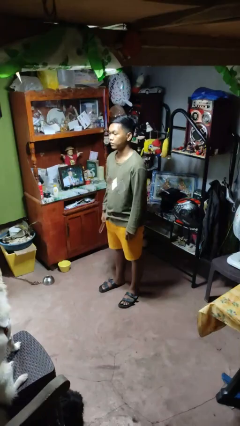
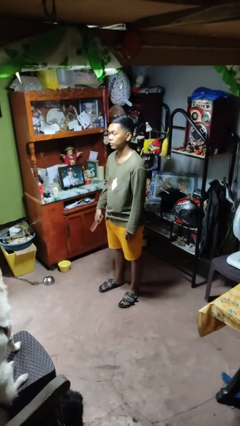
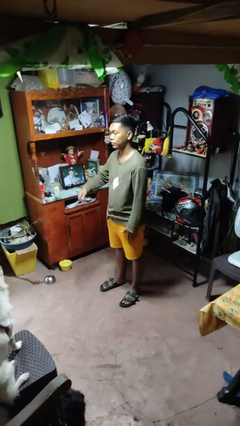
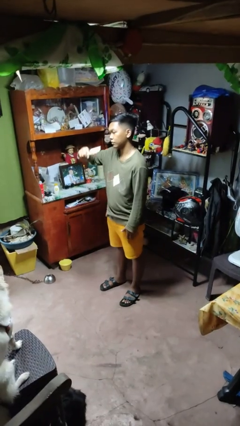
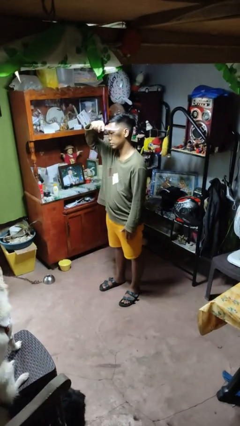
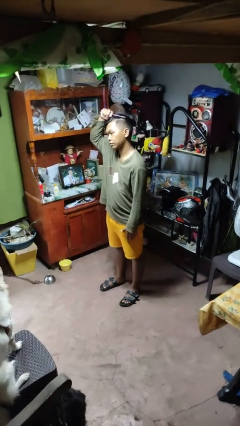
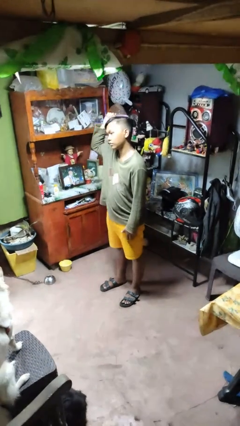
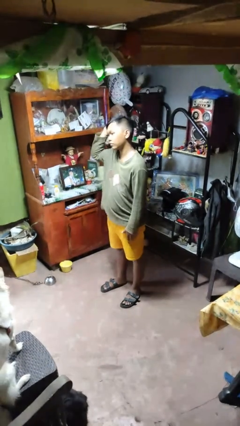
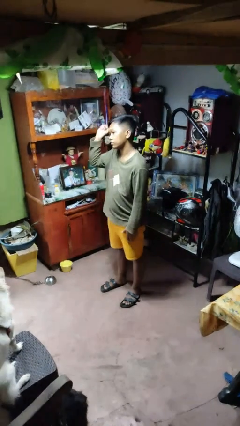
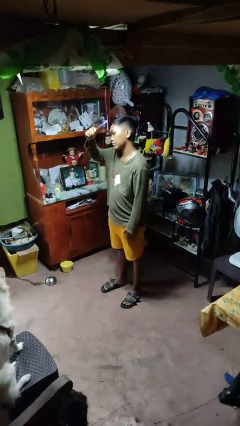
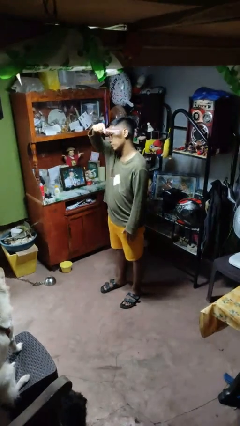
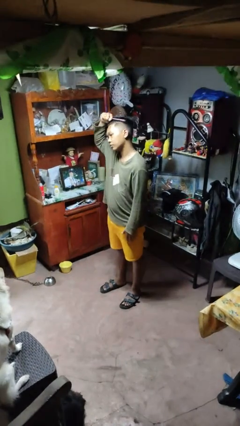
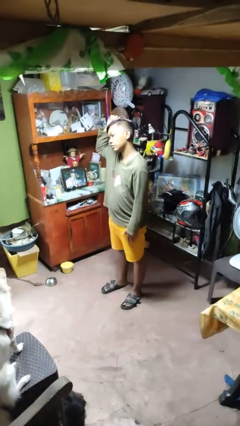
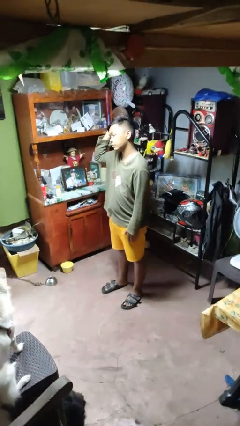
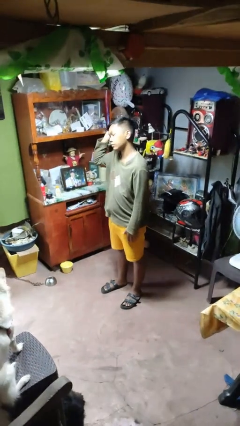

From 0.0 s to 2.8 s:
person brushes hair

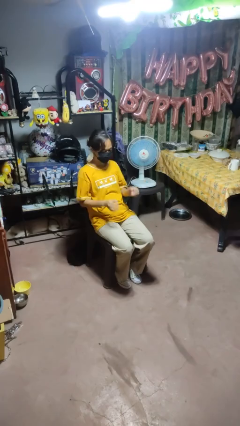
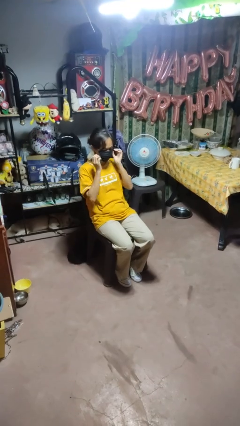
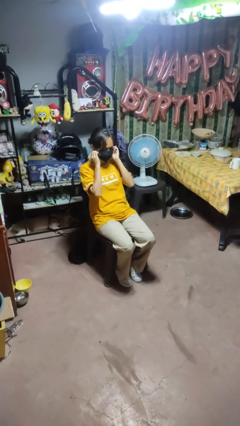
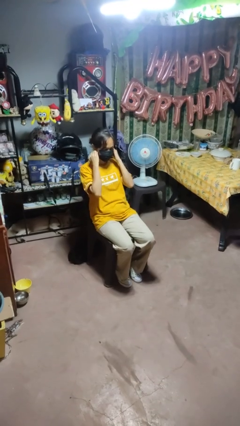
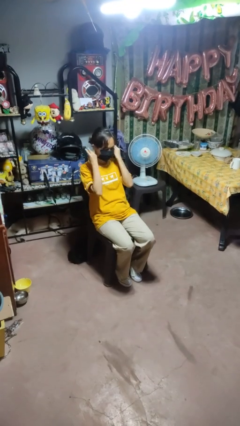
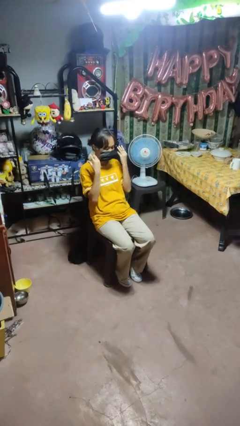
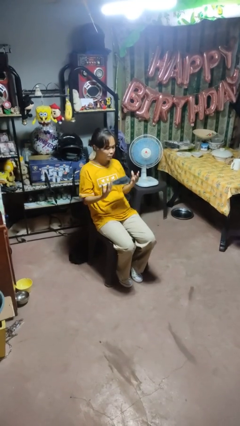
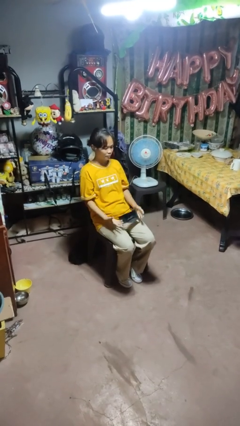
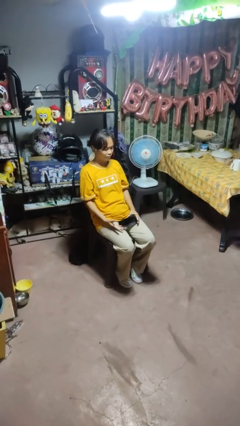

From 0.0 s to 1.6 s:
person takes off facemask

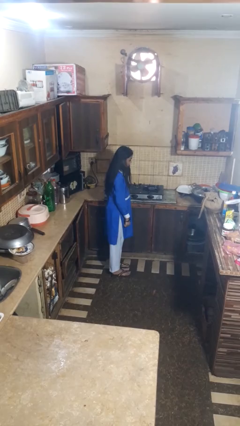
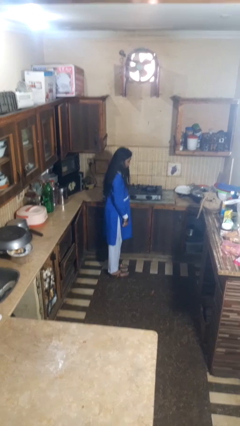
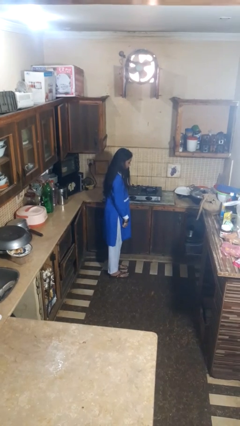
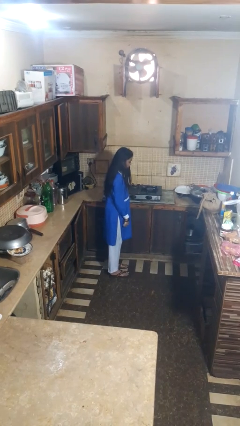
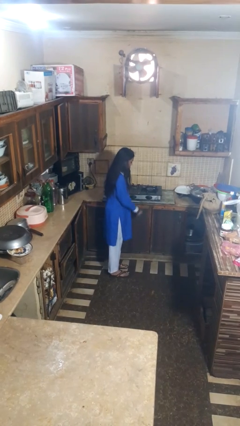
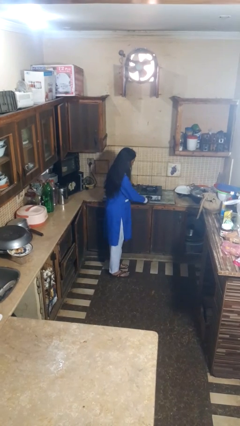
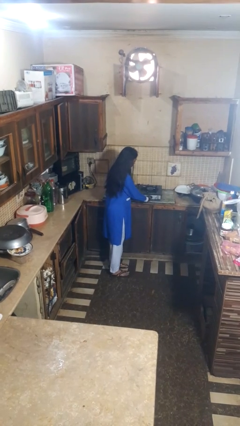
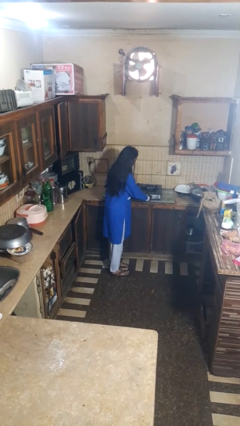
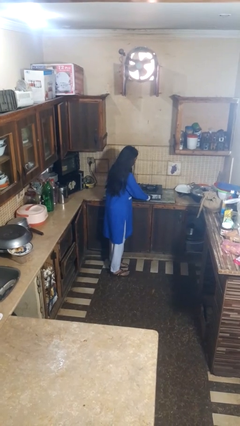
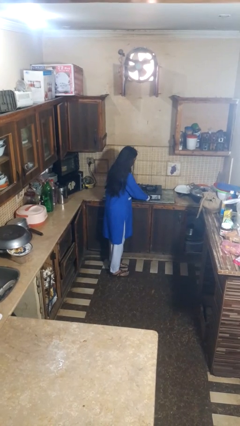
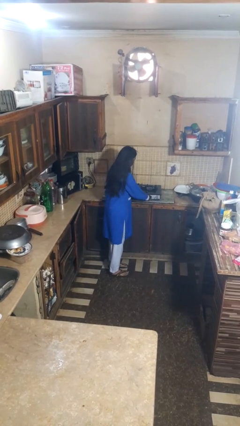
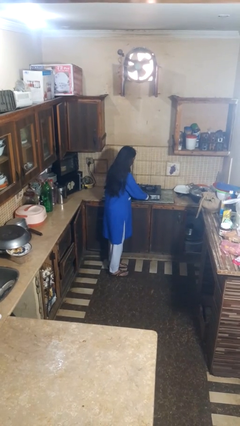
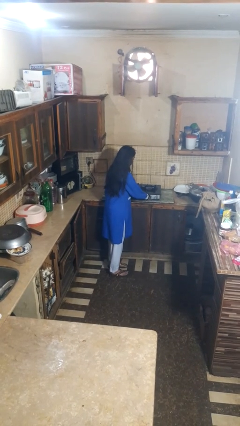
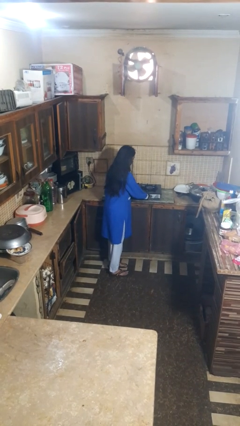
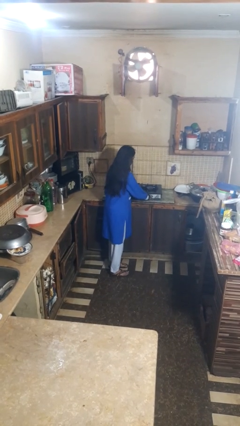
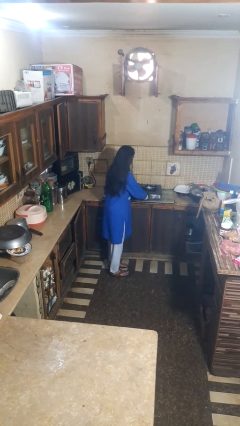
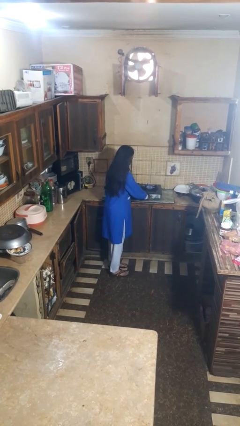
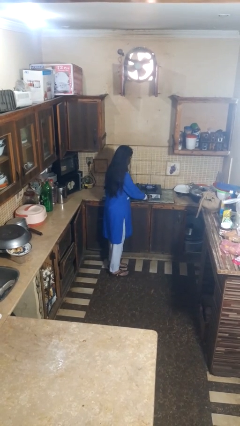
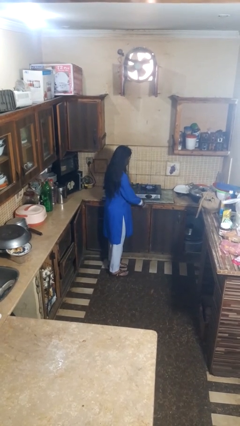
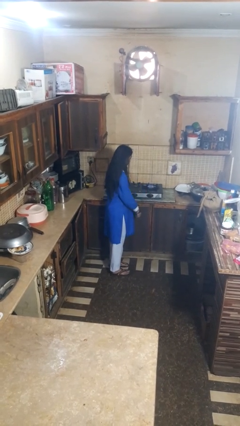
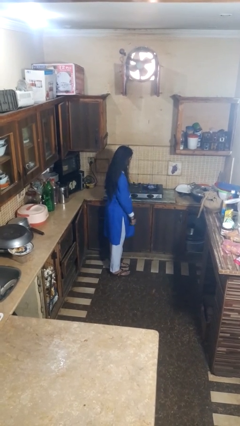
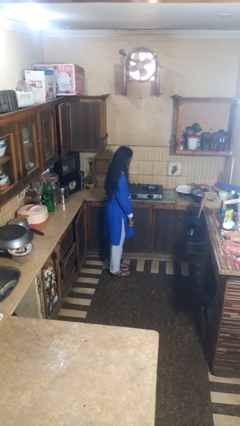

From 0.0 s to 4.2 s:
person turns on stovetop

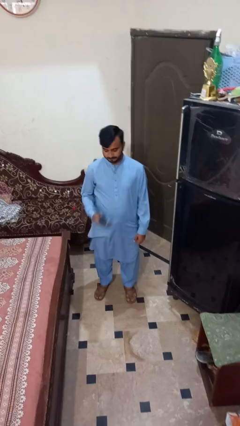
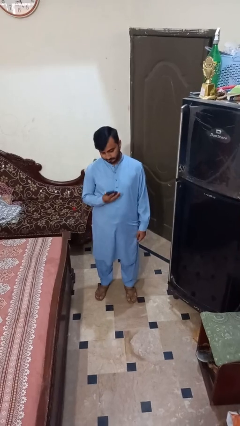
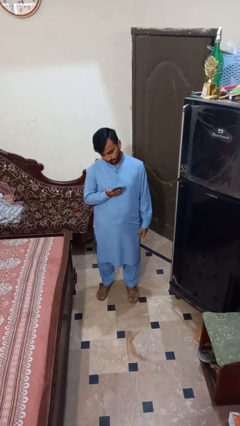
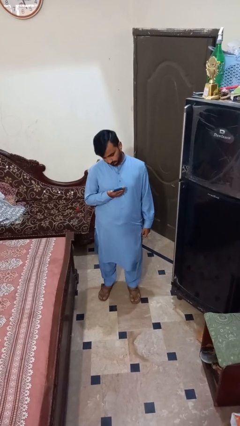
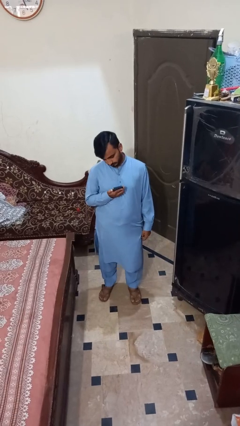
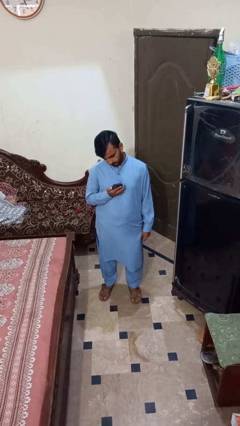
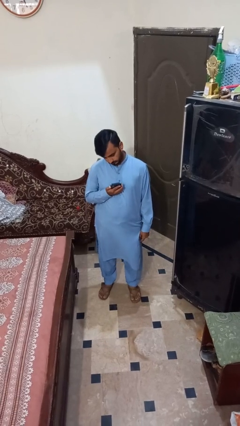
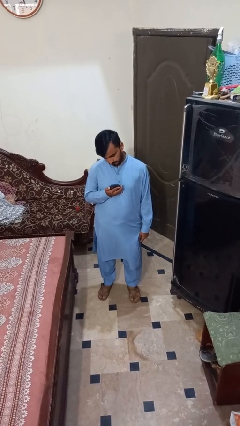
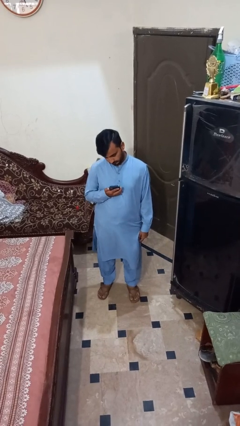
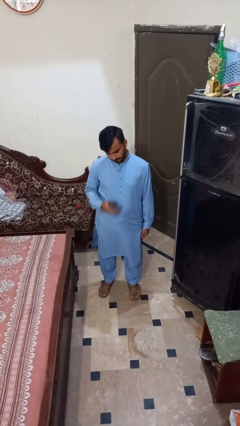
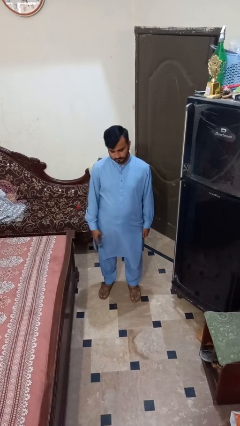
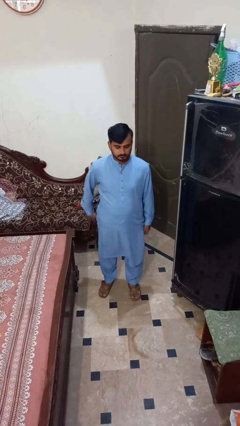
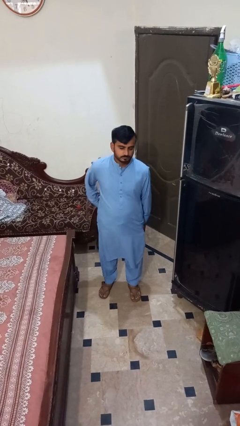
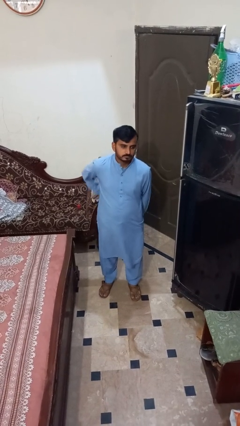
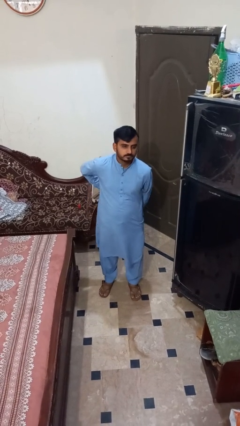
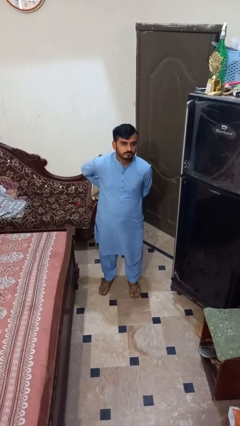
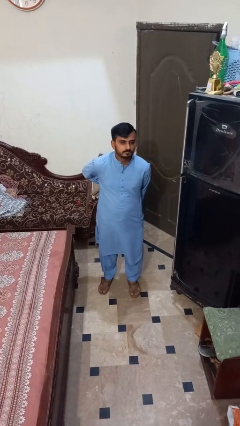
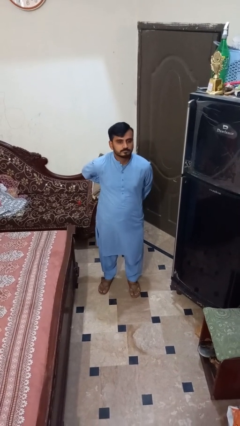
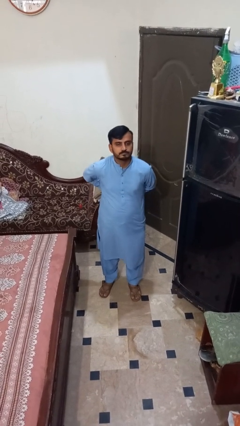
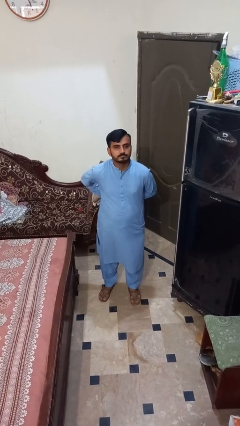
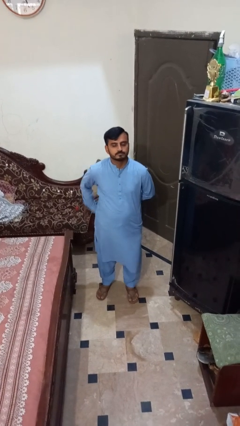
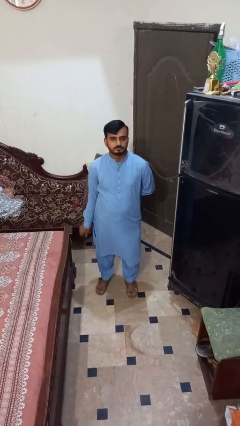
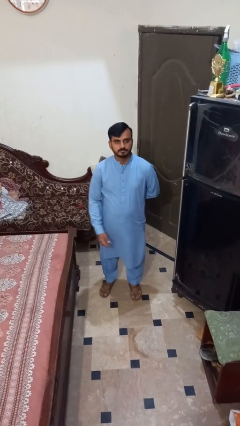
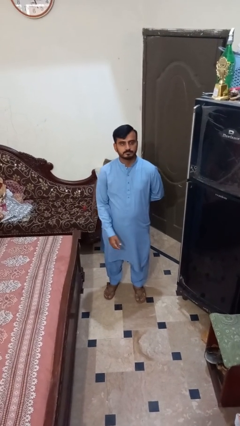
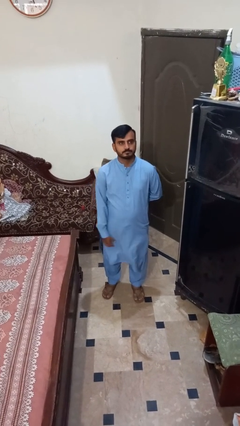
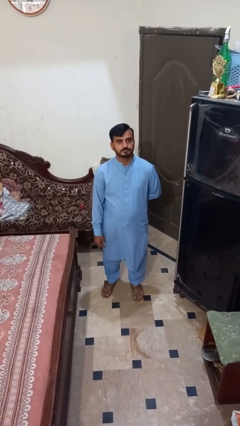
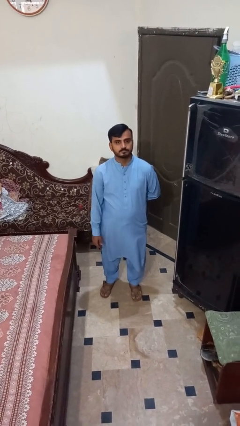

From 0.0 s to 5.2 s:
person puts phone into pocket

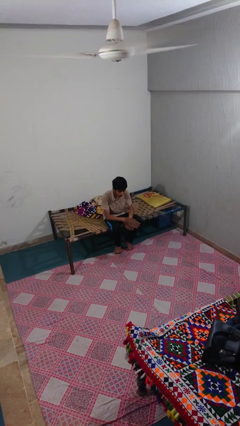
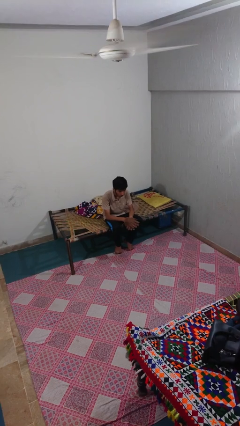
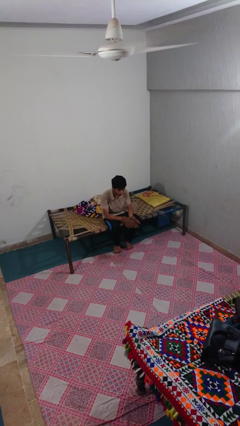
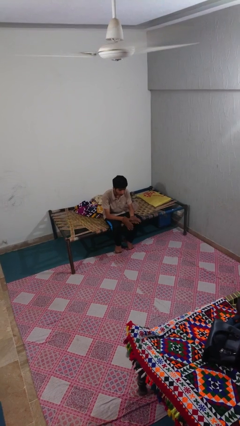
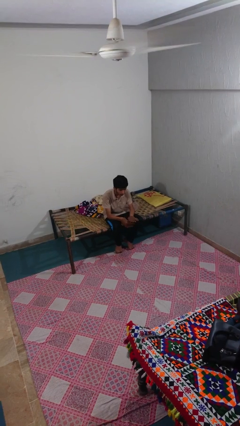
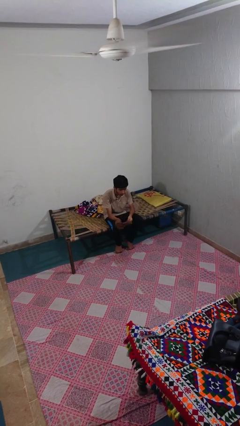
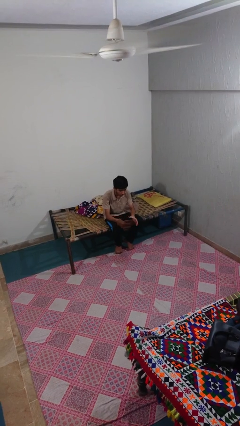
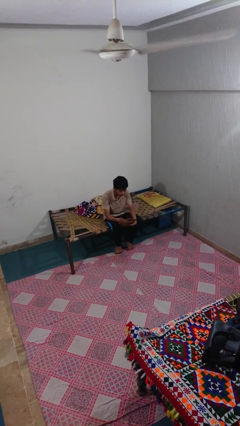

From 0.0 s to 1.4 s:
person takes off gloves

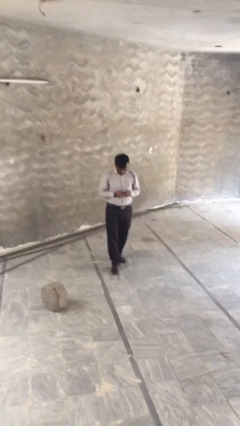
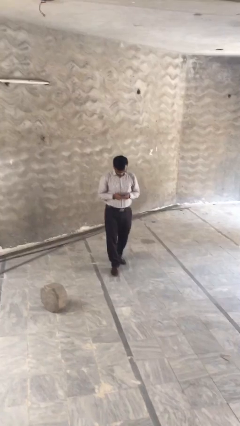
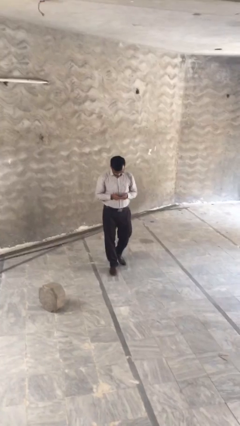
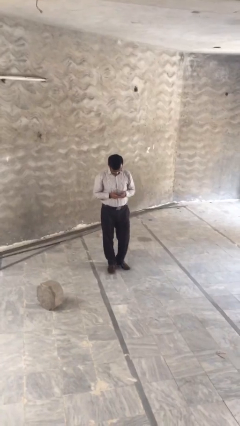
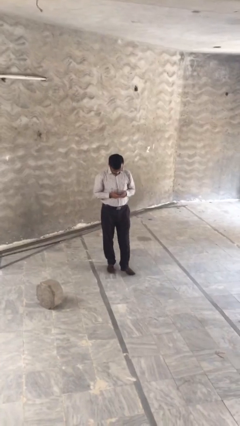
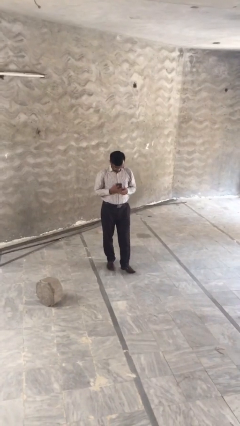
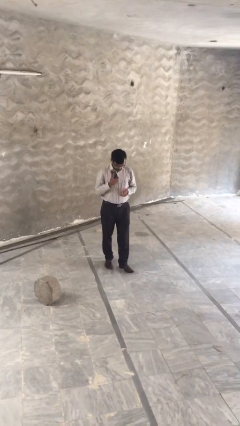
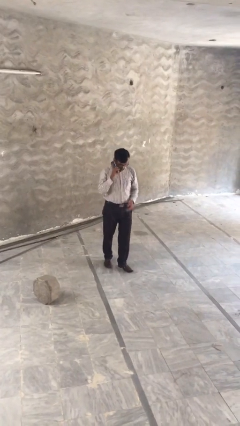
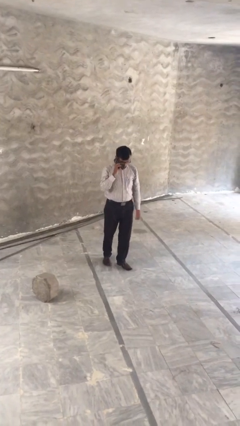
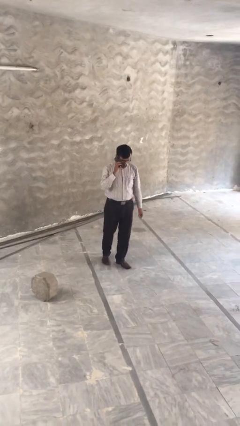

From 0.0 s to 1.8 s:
person talks on phone

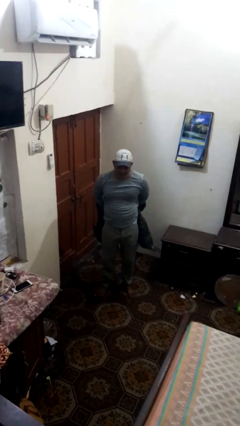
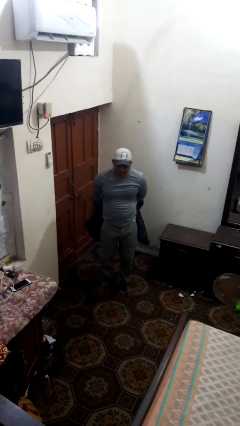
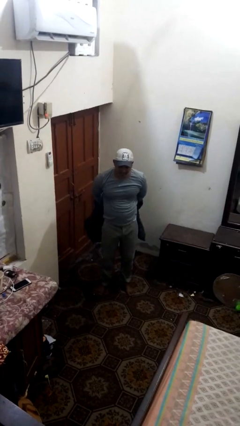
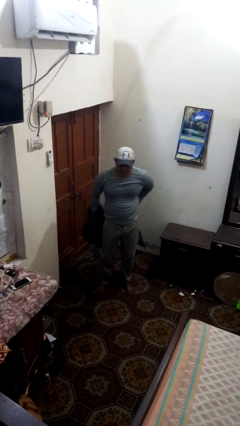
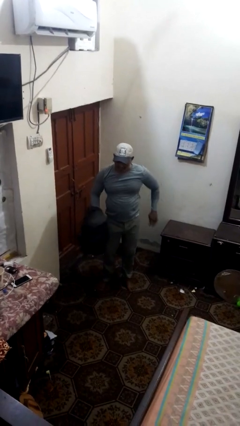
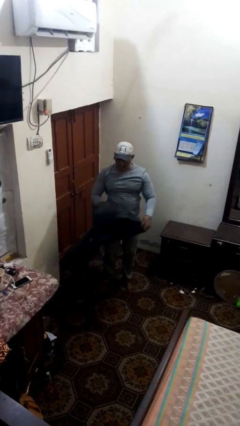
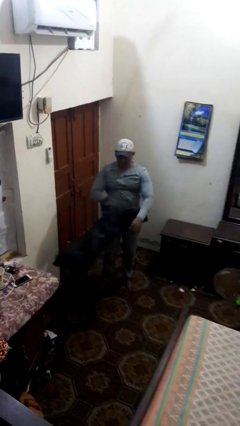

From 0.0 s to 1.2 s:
person takes off jacket
